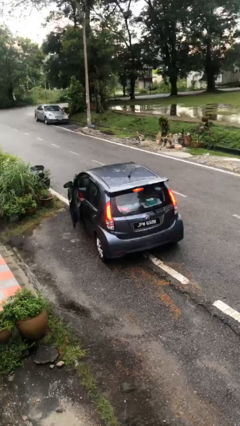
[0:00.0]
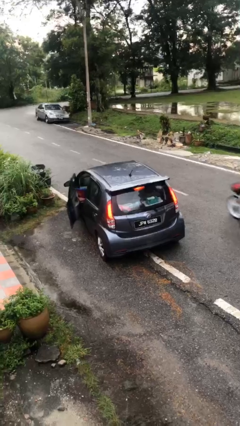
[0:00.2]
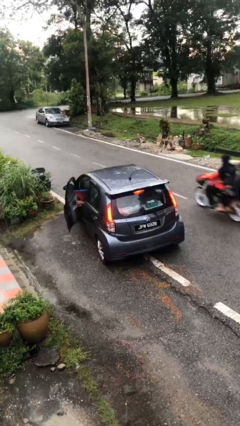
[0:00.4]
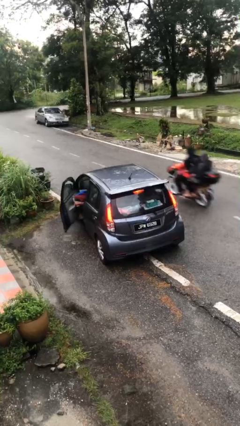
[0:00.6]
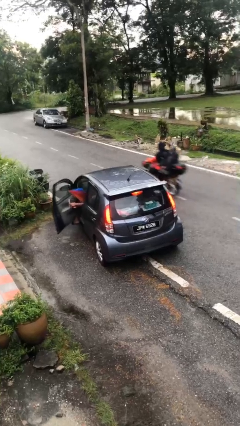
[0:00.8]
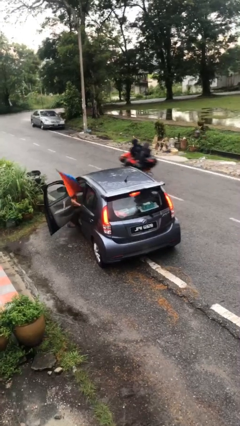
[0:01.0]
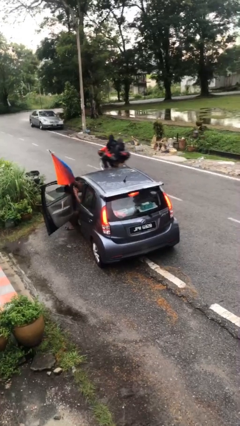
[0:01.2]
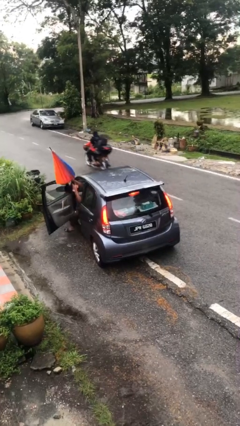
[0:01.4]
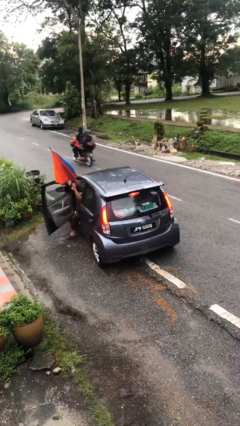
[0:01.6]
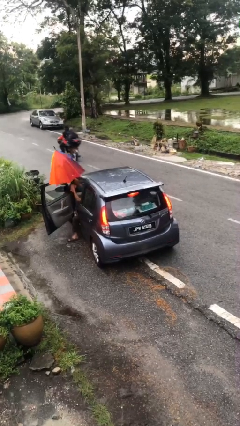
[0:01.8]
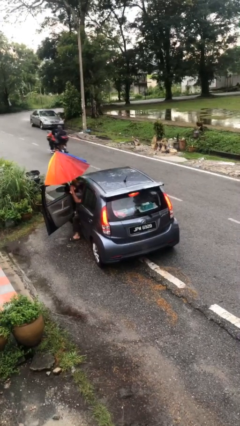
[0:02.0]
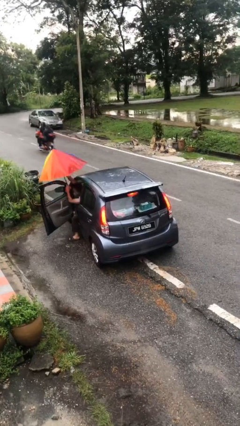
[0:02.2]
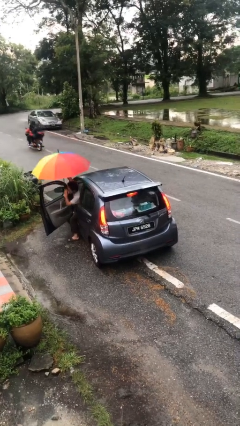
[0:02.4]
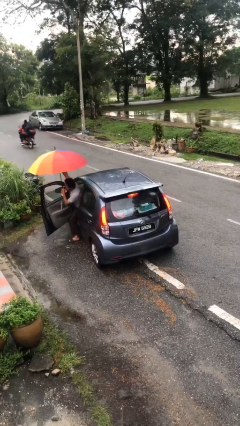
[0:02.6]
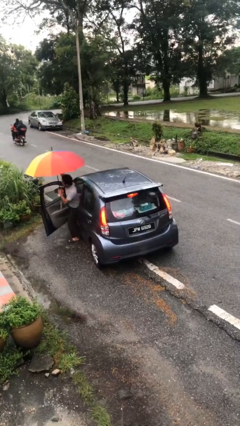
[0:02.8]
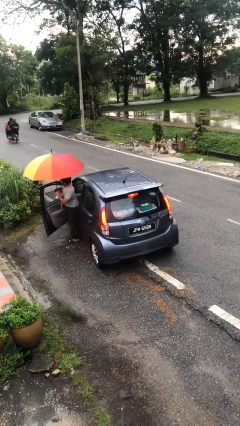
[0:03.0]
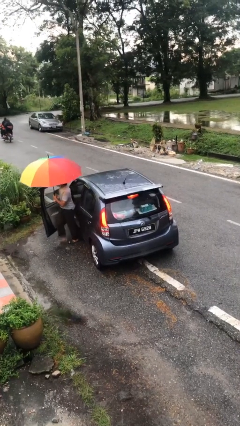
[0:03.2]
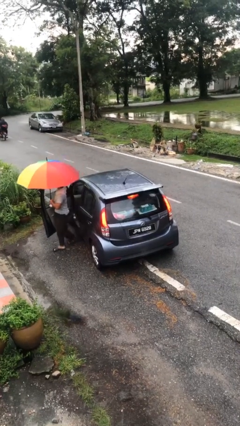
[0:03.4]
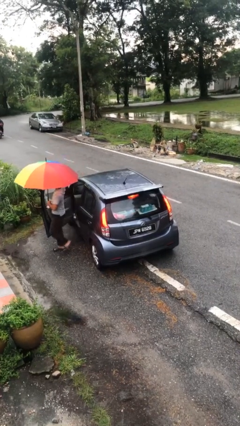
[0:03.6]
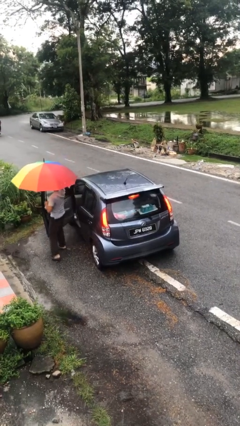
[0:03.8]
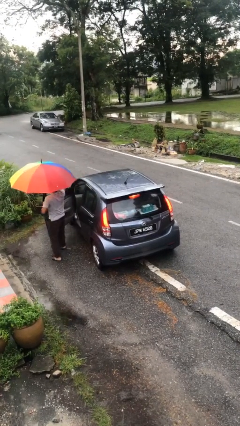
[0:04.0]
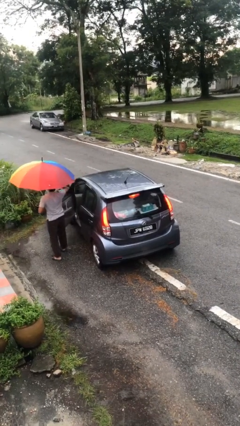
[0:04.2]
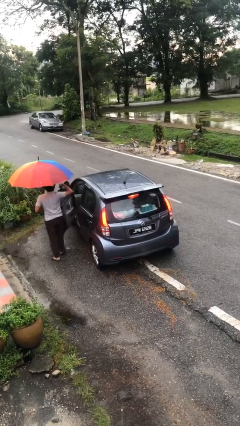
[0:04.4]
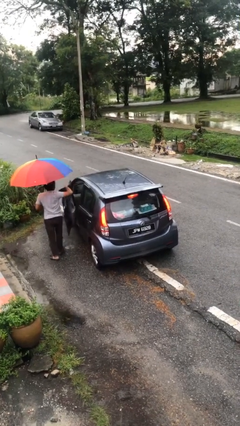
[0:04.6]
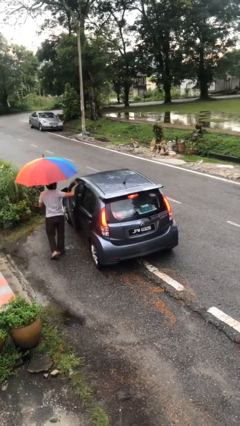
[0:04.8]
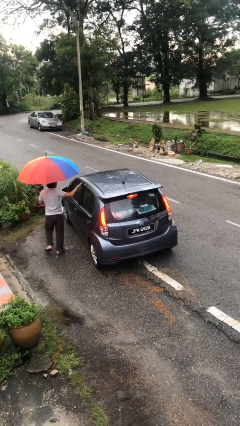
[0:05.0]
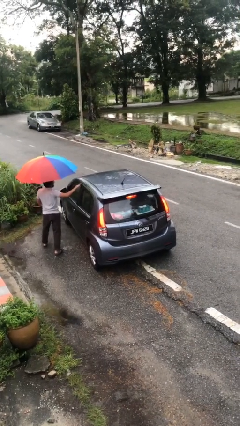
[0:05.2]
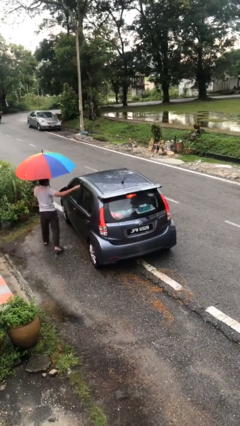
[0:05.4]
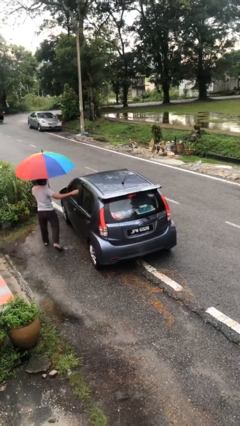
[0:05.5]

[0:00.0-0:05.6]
car drops off person

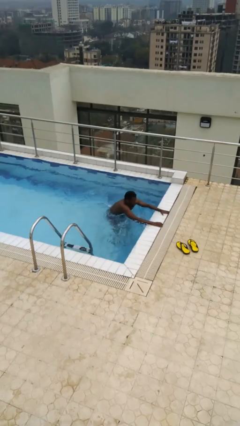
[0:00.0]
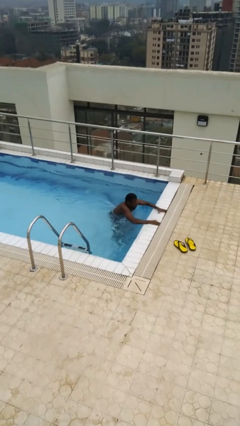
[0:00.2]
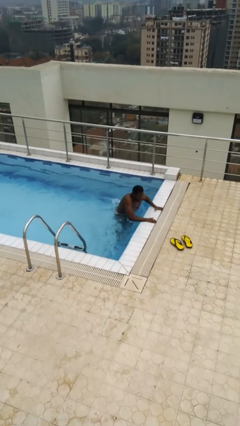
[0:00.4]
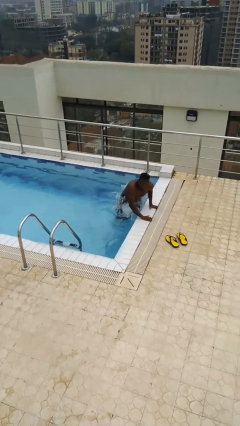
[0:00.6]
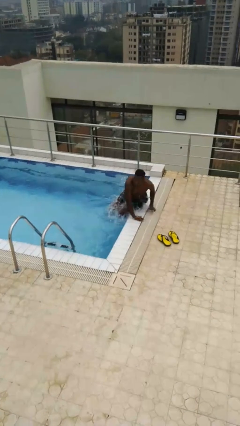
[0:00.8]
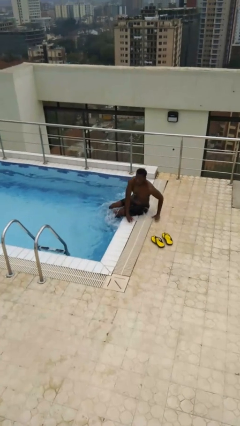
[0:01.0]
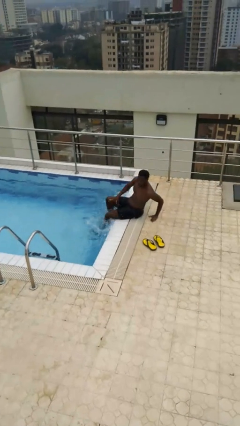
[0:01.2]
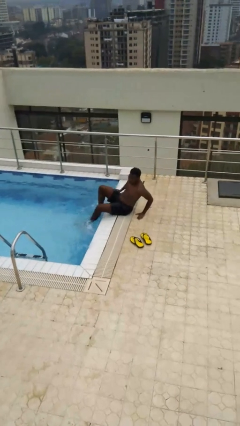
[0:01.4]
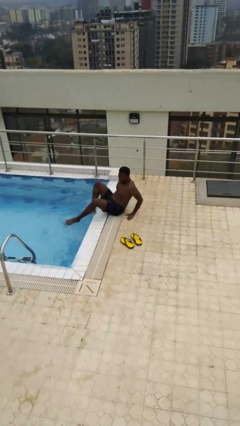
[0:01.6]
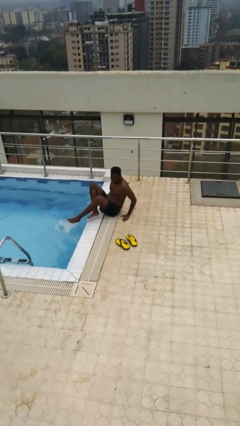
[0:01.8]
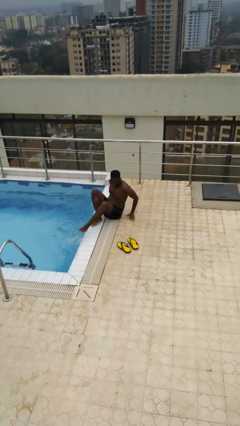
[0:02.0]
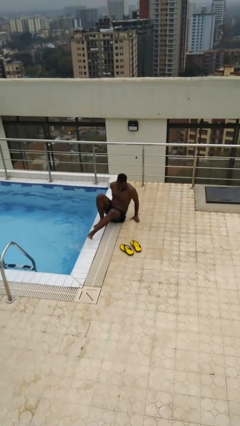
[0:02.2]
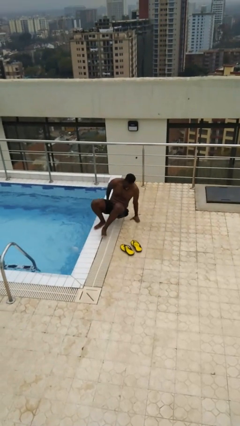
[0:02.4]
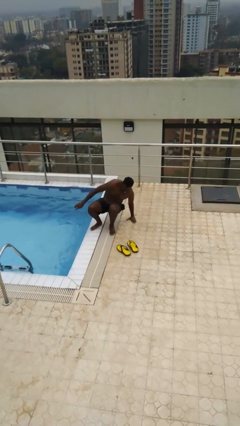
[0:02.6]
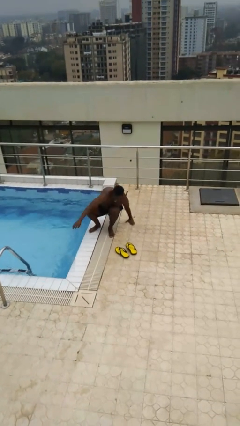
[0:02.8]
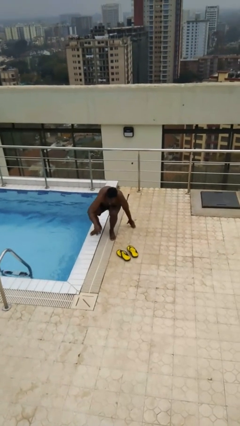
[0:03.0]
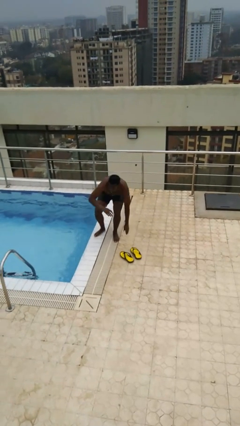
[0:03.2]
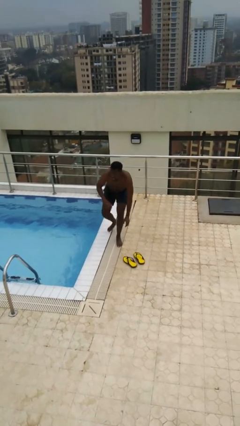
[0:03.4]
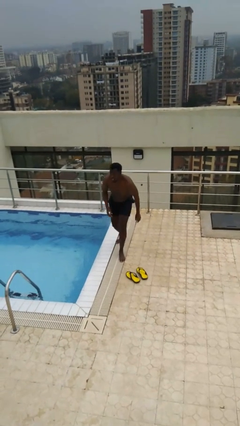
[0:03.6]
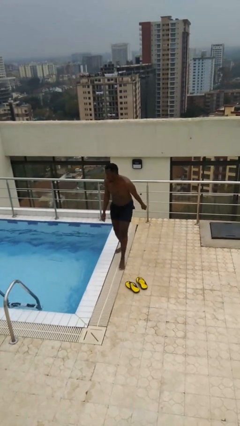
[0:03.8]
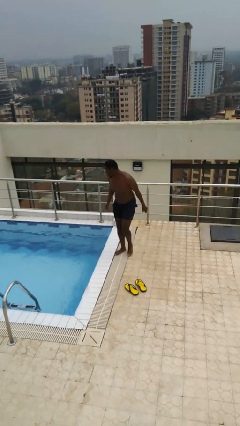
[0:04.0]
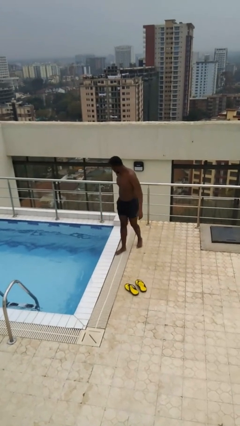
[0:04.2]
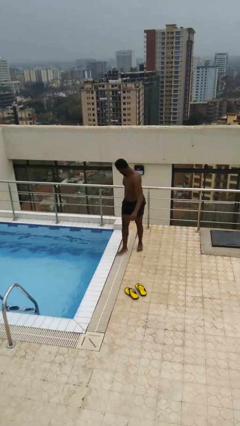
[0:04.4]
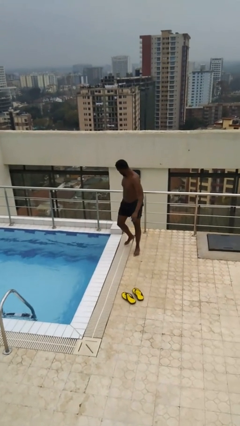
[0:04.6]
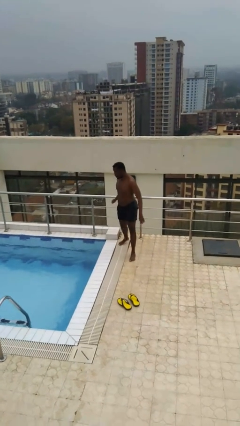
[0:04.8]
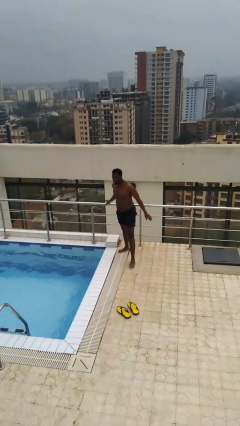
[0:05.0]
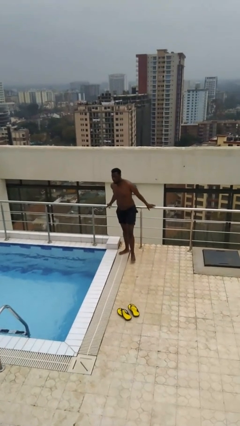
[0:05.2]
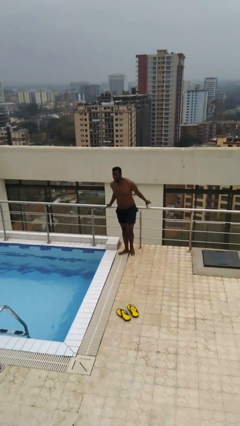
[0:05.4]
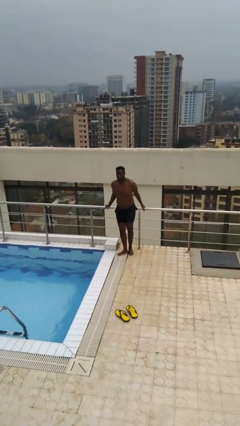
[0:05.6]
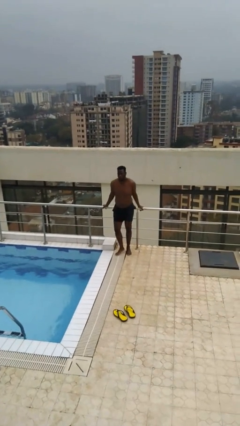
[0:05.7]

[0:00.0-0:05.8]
person exits pool

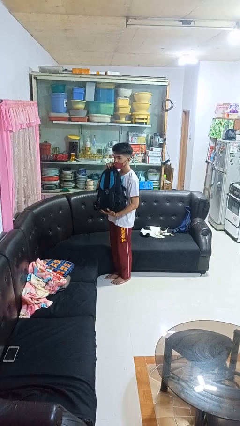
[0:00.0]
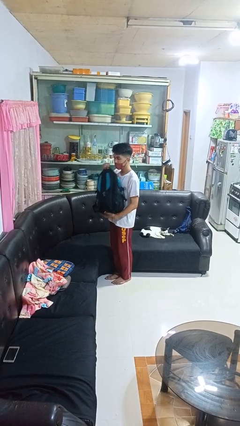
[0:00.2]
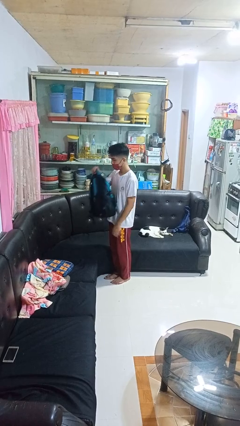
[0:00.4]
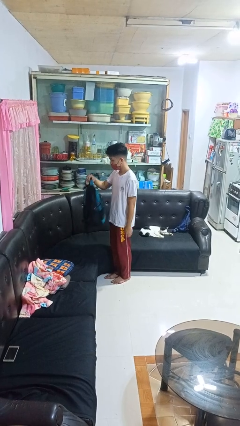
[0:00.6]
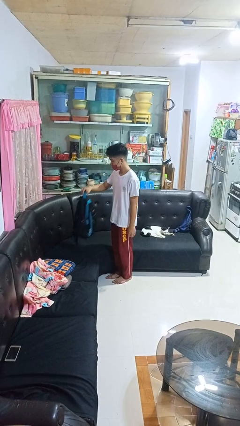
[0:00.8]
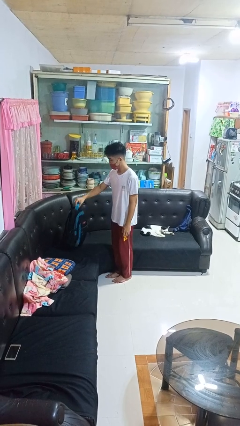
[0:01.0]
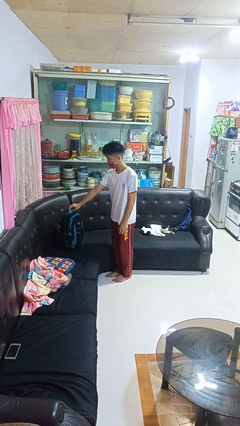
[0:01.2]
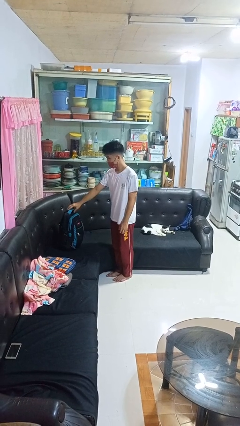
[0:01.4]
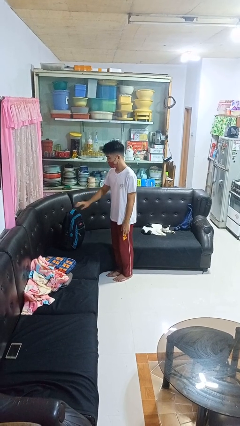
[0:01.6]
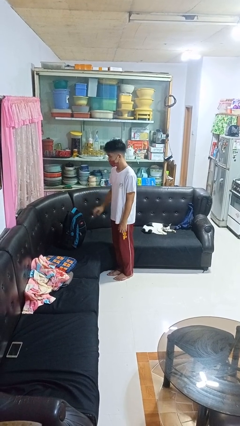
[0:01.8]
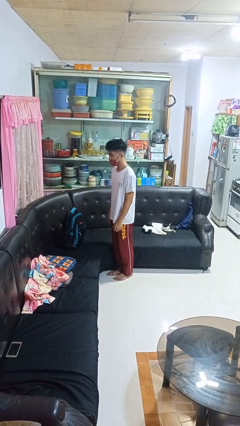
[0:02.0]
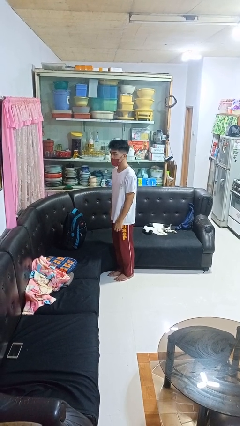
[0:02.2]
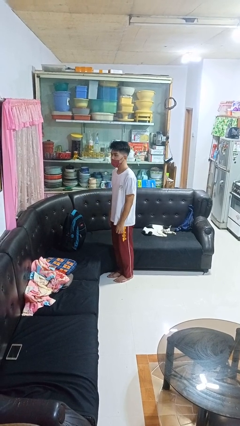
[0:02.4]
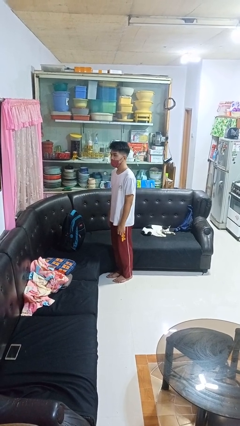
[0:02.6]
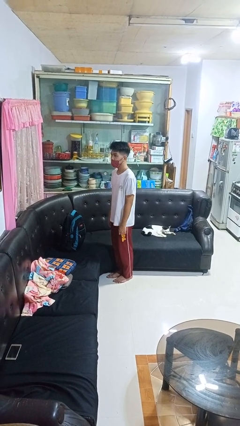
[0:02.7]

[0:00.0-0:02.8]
person puts down object on couch

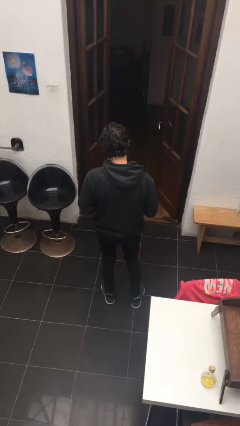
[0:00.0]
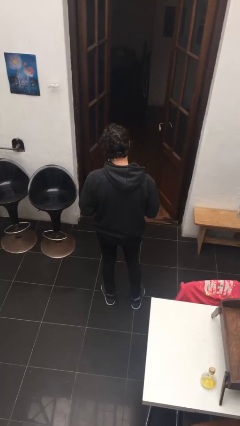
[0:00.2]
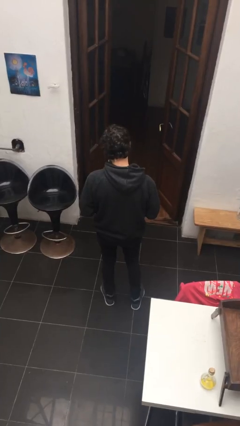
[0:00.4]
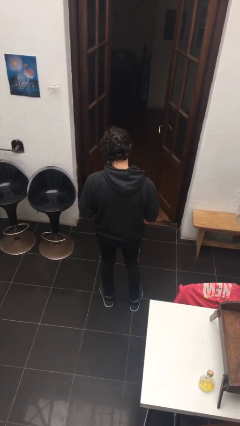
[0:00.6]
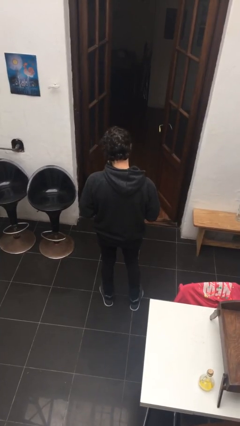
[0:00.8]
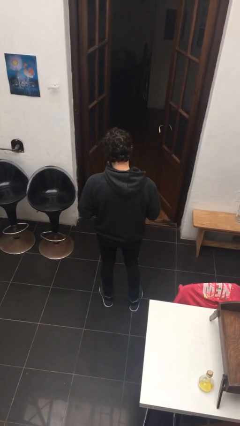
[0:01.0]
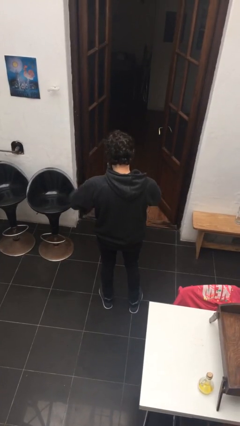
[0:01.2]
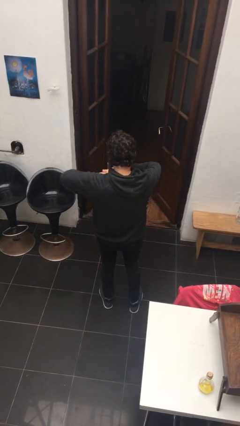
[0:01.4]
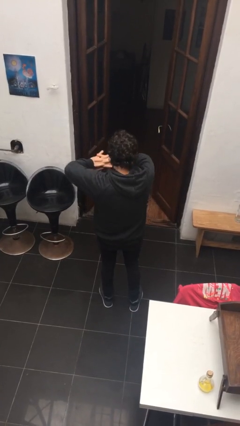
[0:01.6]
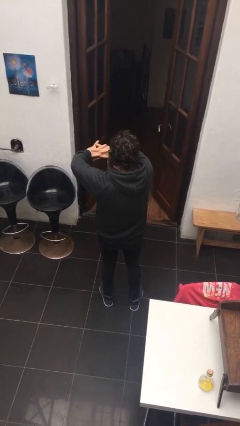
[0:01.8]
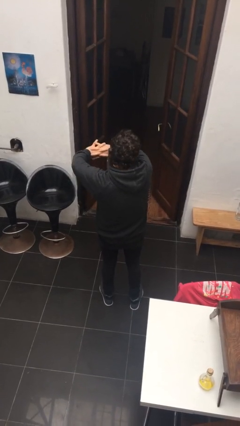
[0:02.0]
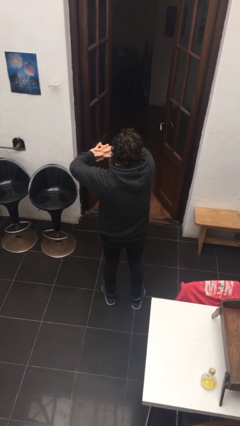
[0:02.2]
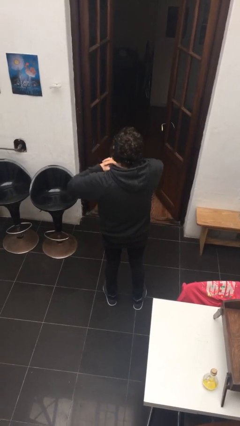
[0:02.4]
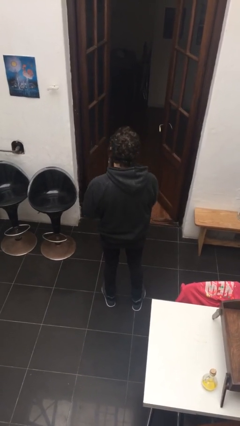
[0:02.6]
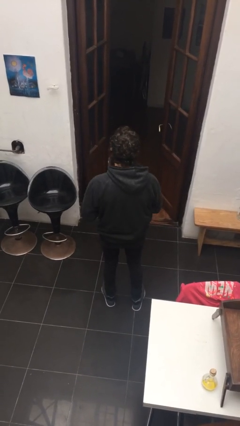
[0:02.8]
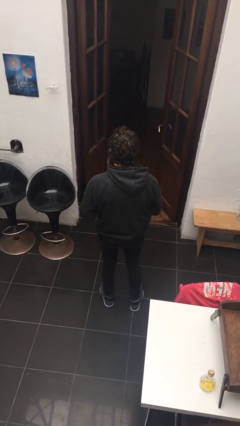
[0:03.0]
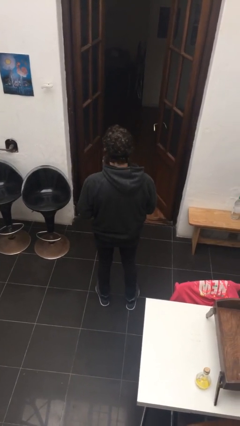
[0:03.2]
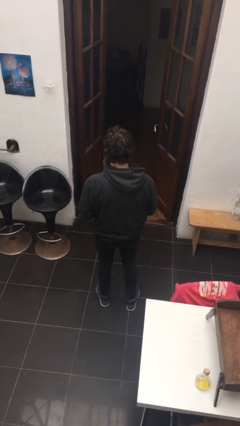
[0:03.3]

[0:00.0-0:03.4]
person cracks knuckles

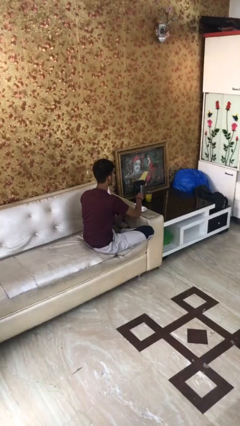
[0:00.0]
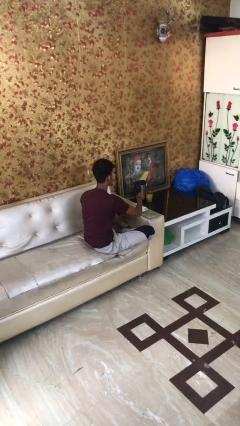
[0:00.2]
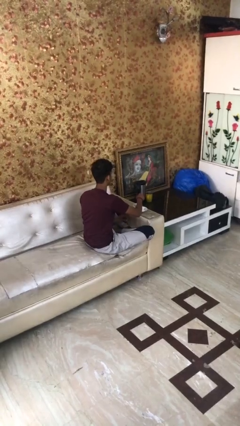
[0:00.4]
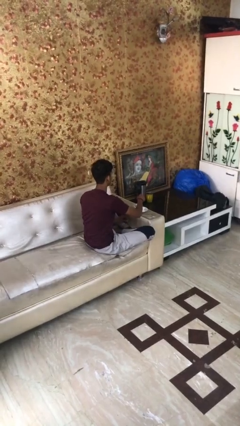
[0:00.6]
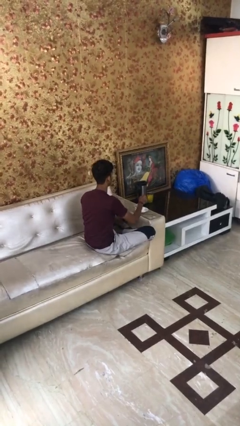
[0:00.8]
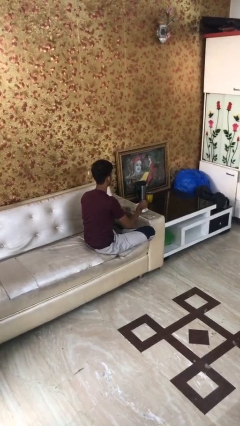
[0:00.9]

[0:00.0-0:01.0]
person stirs mug
